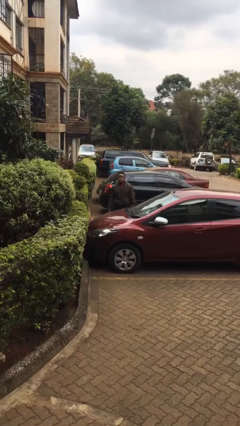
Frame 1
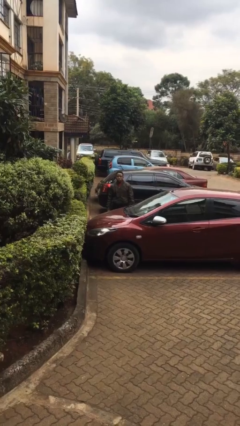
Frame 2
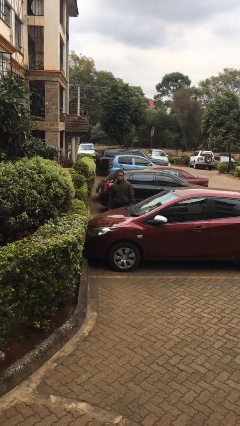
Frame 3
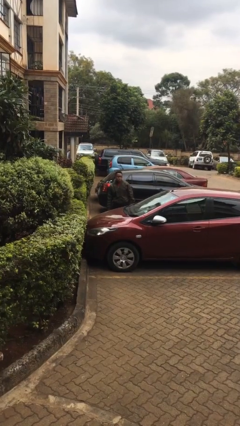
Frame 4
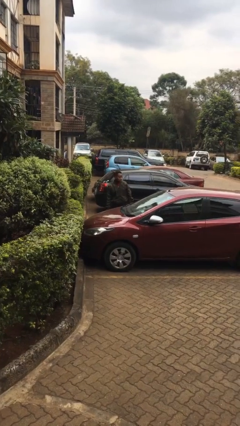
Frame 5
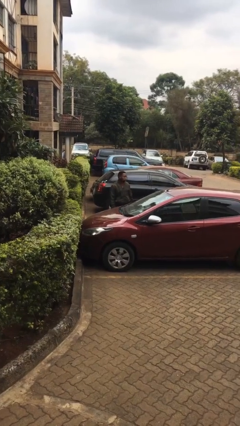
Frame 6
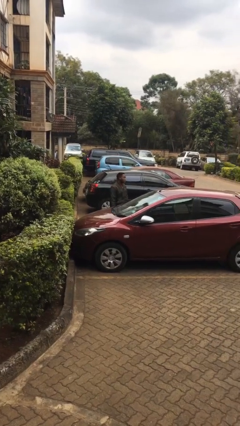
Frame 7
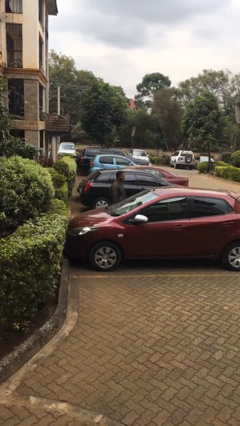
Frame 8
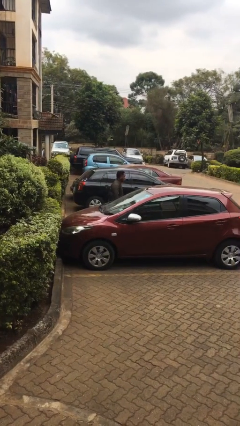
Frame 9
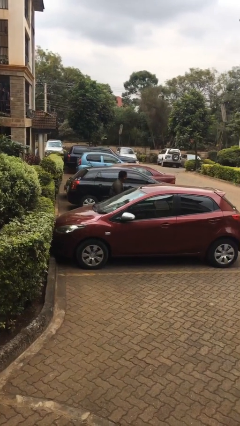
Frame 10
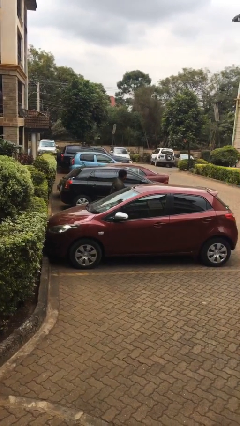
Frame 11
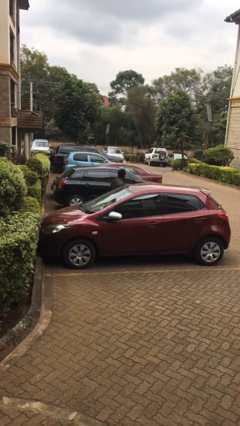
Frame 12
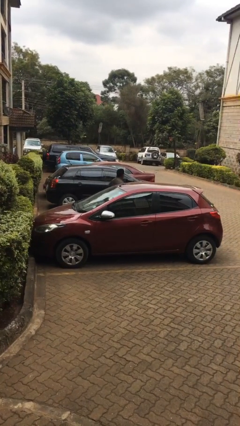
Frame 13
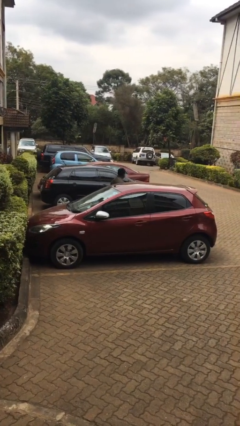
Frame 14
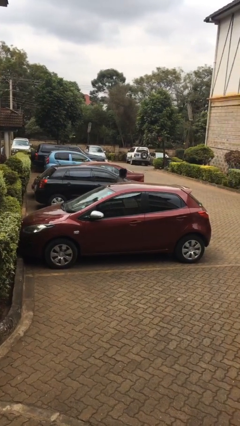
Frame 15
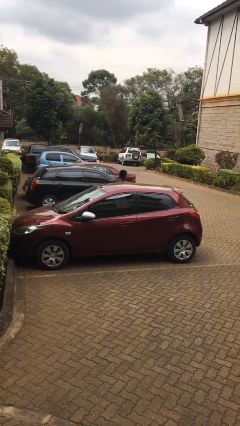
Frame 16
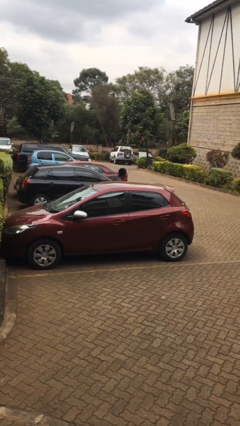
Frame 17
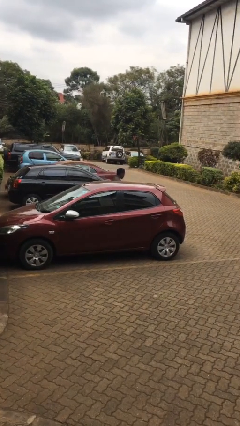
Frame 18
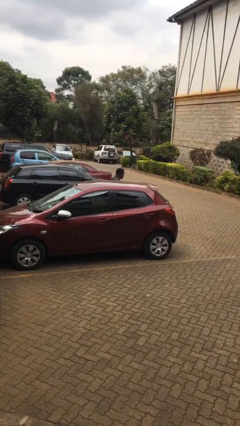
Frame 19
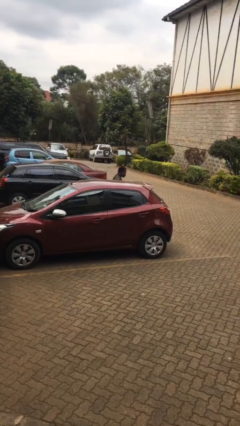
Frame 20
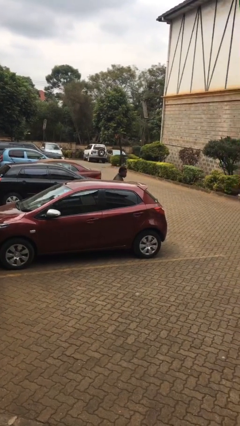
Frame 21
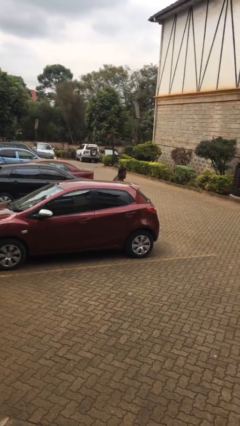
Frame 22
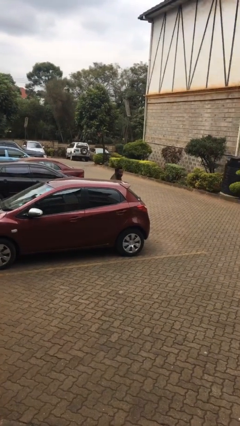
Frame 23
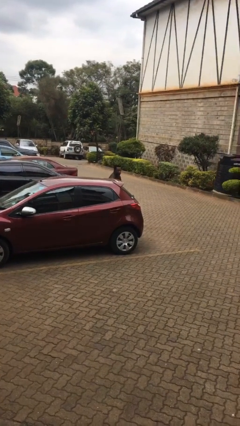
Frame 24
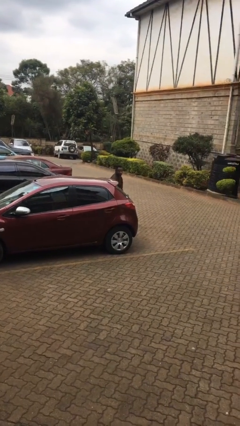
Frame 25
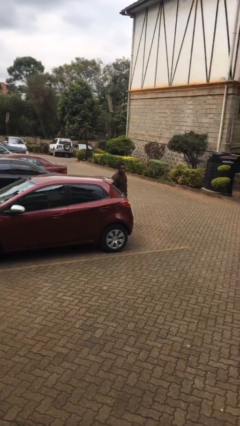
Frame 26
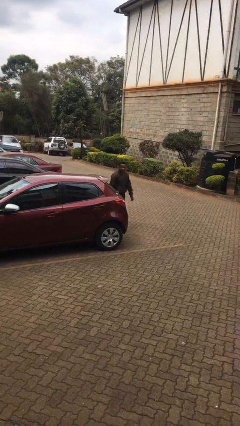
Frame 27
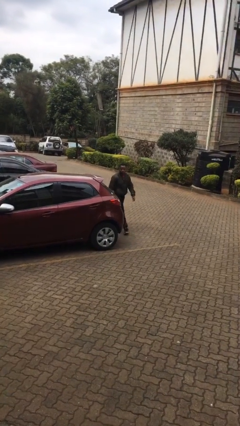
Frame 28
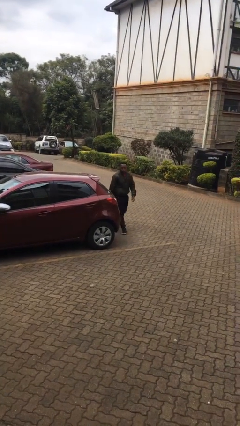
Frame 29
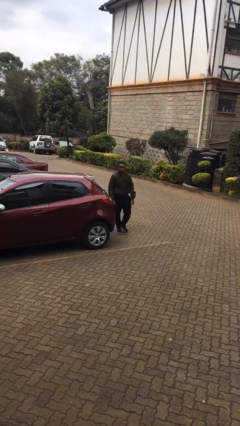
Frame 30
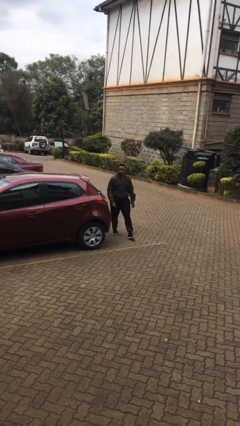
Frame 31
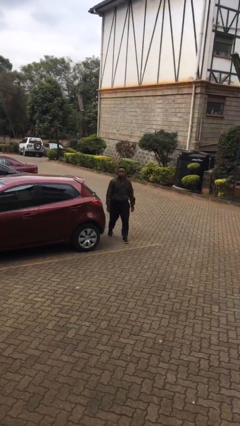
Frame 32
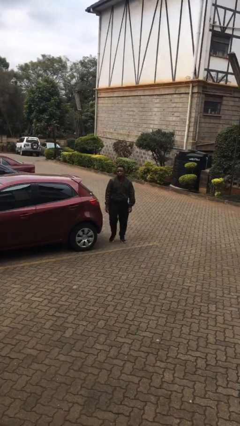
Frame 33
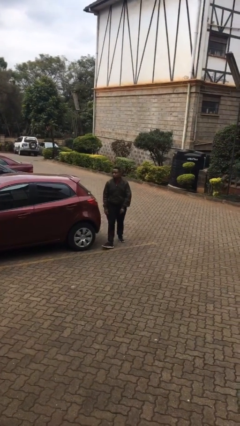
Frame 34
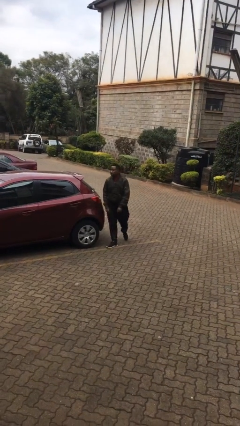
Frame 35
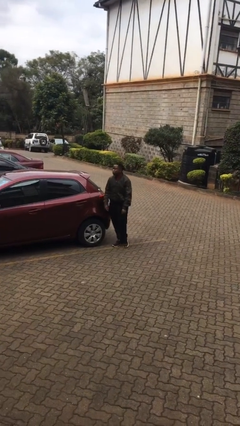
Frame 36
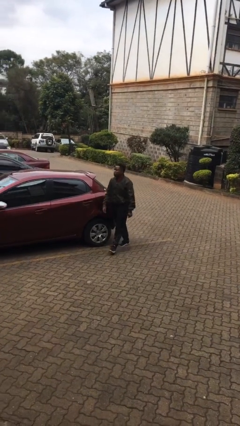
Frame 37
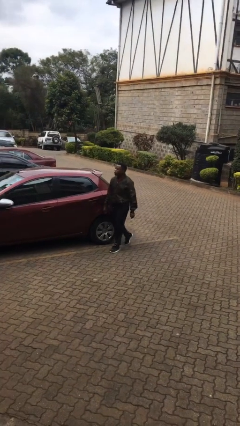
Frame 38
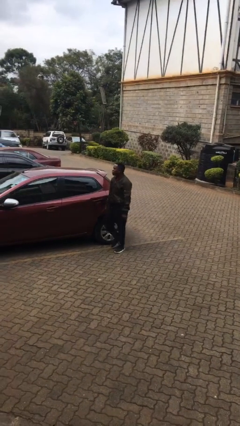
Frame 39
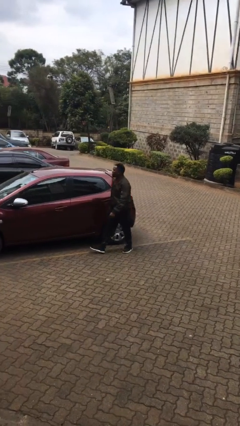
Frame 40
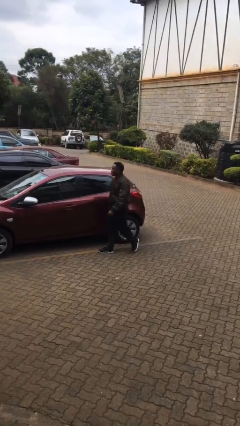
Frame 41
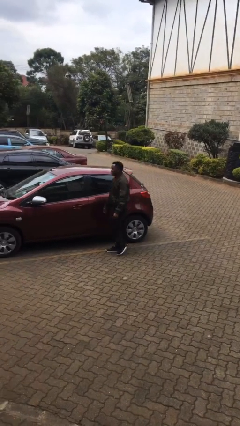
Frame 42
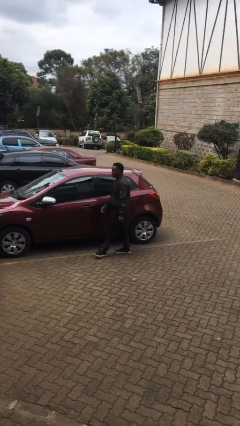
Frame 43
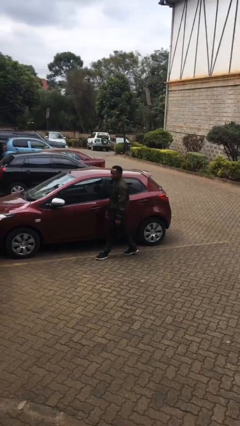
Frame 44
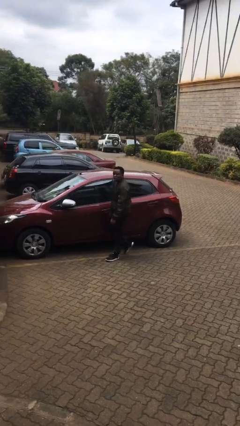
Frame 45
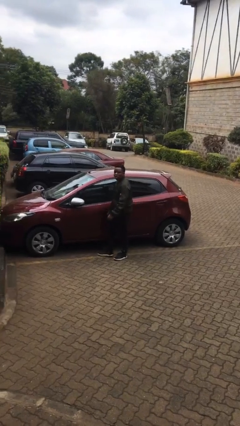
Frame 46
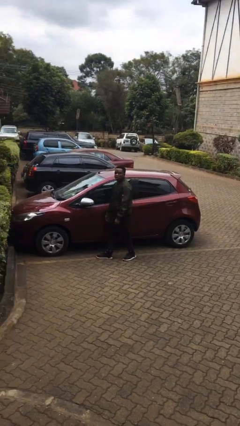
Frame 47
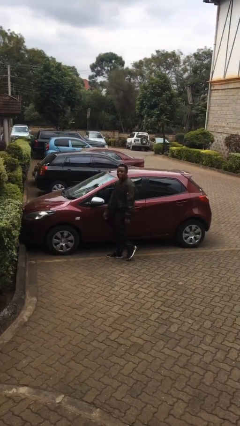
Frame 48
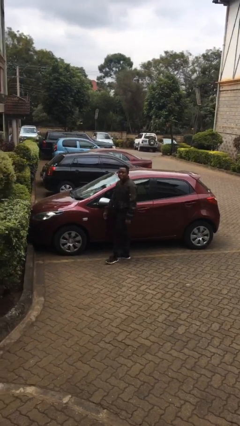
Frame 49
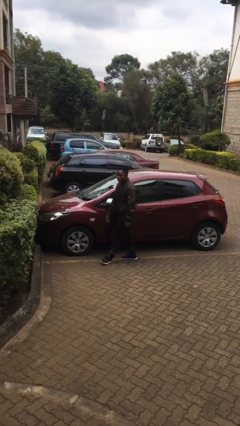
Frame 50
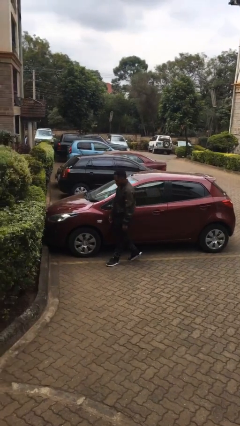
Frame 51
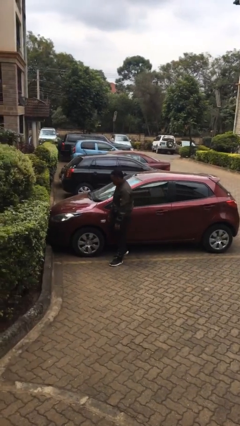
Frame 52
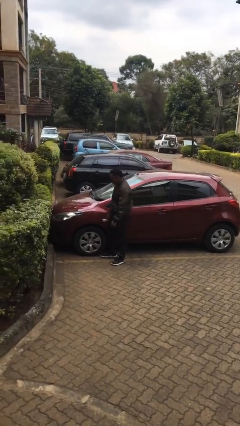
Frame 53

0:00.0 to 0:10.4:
person walks around car

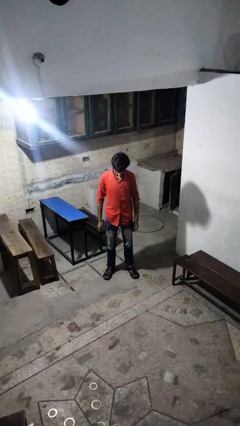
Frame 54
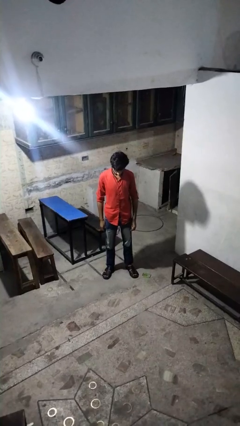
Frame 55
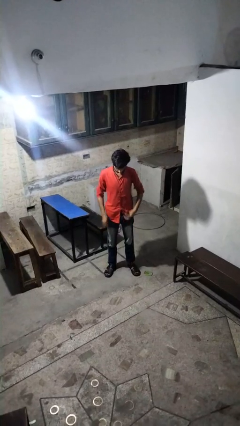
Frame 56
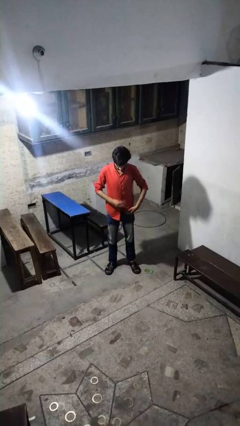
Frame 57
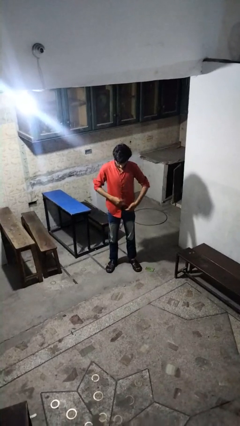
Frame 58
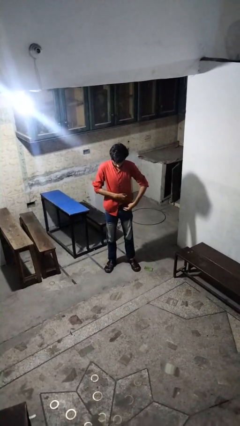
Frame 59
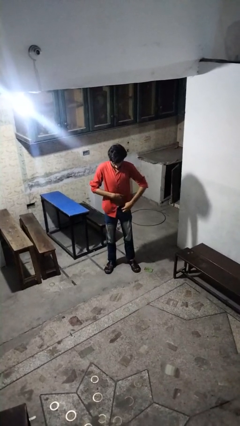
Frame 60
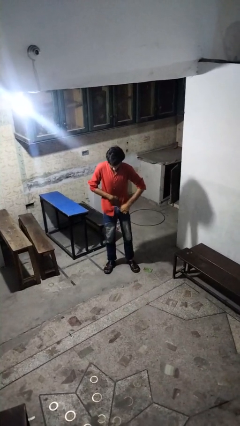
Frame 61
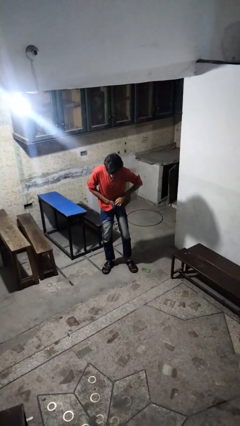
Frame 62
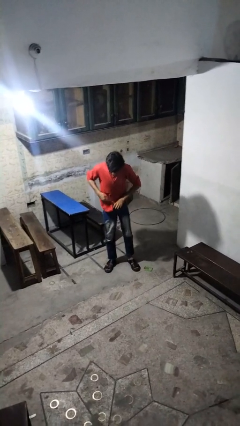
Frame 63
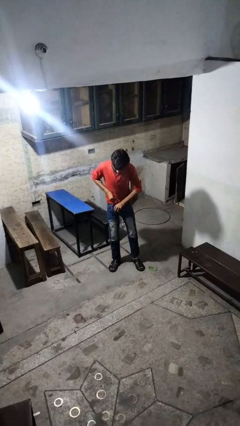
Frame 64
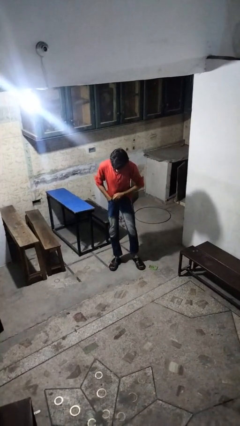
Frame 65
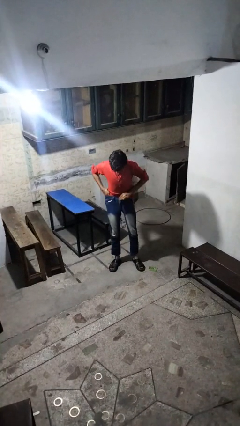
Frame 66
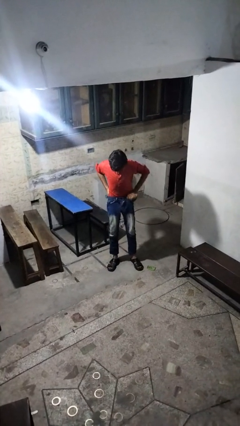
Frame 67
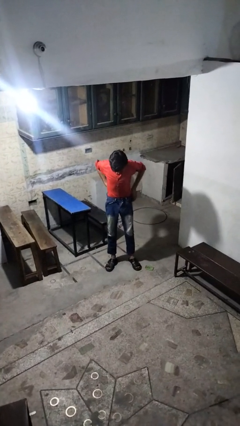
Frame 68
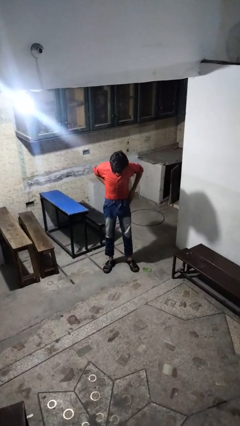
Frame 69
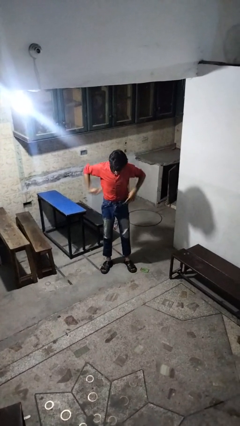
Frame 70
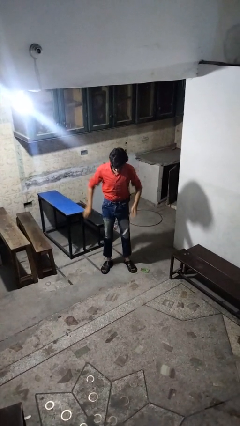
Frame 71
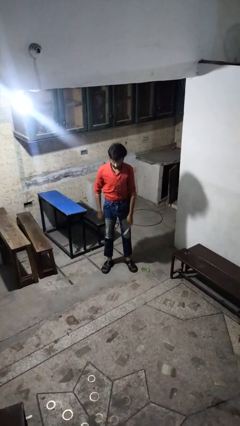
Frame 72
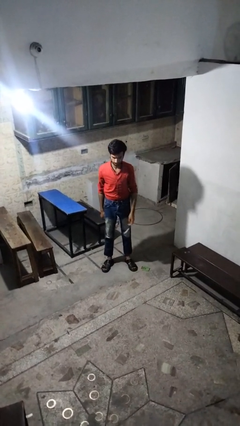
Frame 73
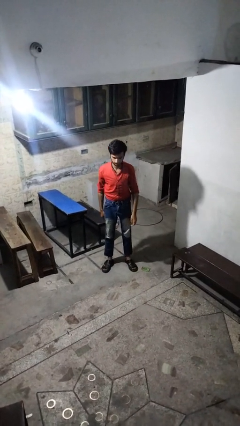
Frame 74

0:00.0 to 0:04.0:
person tucks in shirt

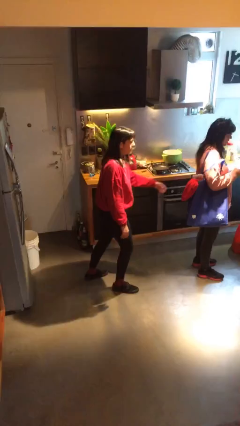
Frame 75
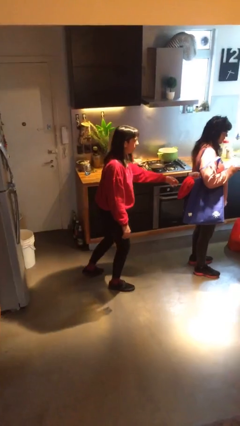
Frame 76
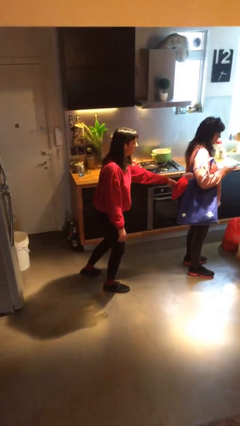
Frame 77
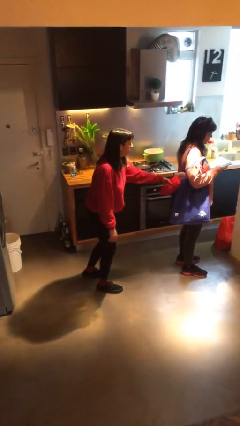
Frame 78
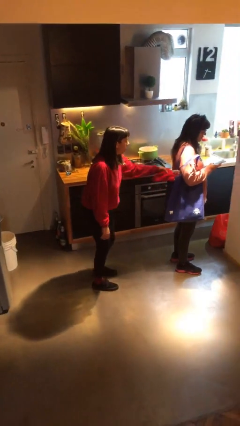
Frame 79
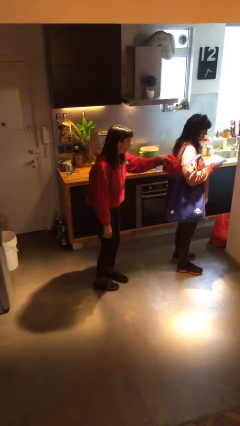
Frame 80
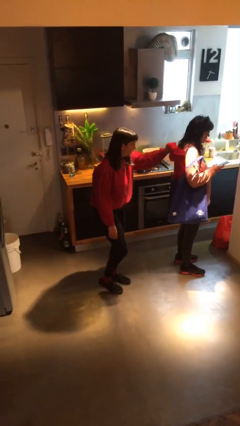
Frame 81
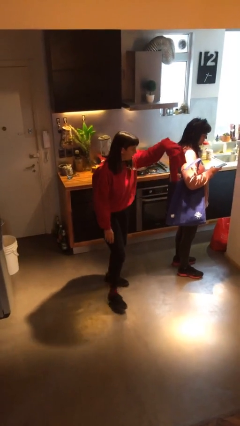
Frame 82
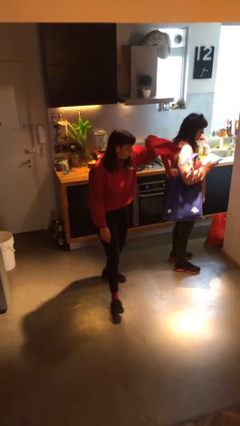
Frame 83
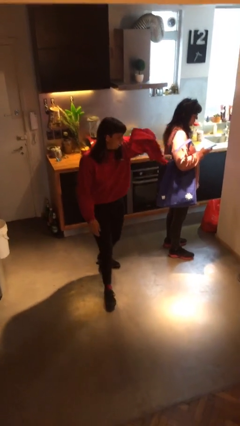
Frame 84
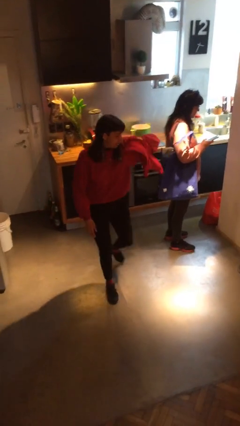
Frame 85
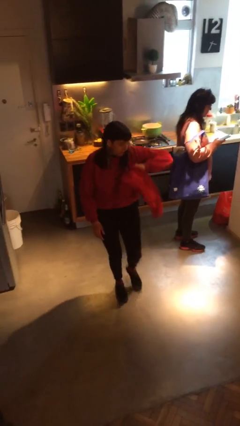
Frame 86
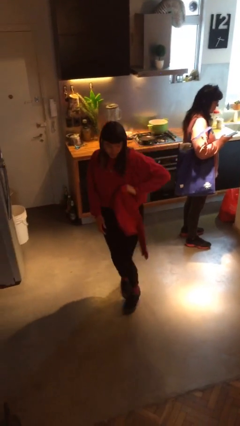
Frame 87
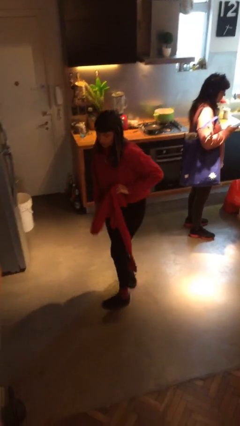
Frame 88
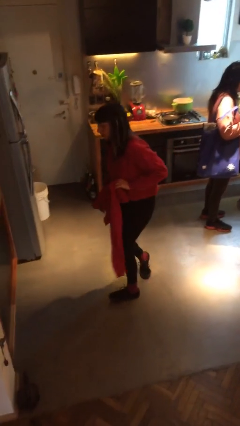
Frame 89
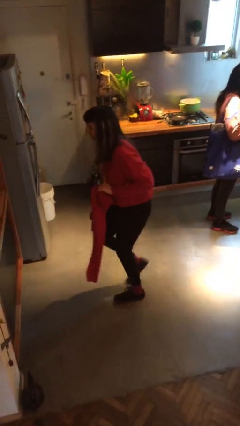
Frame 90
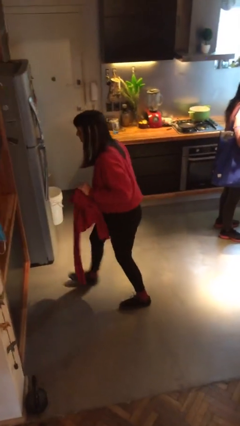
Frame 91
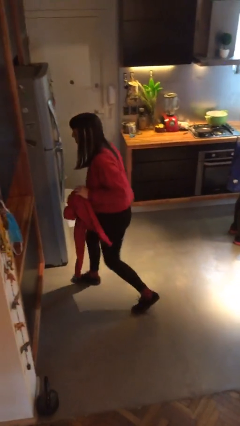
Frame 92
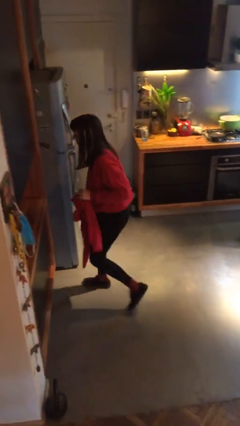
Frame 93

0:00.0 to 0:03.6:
person steals object from person
